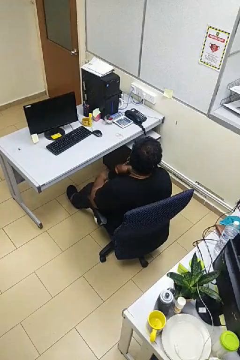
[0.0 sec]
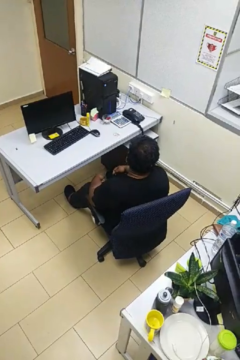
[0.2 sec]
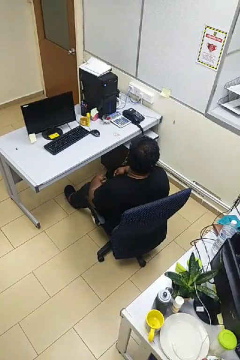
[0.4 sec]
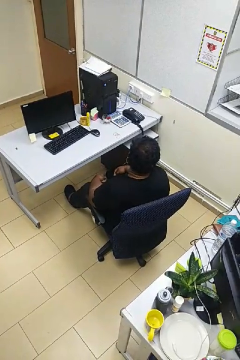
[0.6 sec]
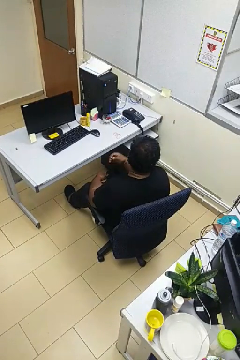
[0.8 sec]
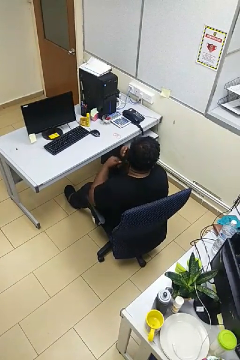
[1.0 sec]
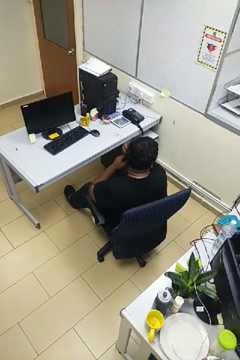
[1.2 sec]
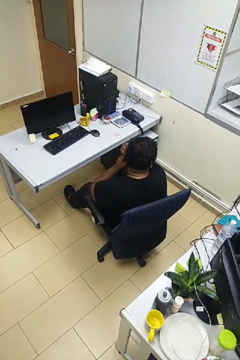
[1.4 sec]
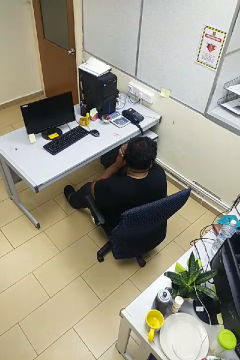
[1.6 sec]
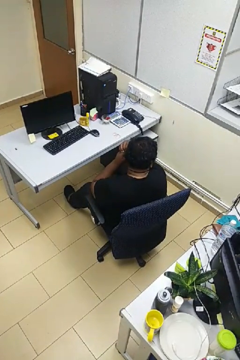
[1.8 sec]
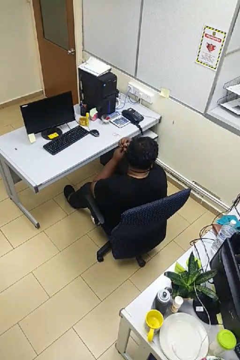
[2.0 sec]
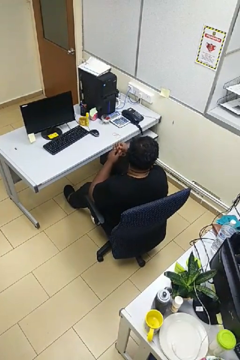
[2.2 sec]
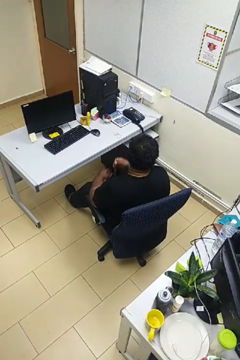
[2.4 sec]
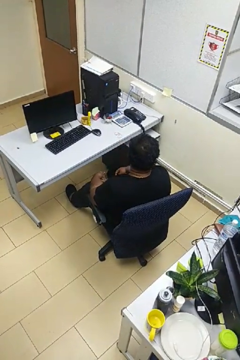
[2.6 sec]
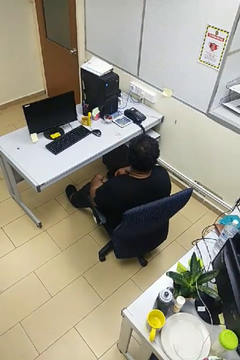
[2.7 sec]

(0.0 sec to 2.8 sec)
person takes off earrings

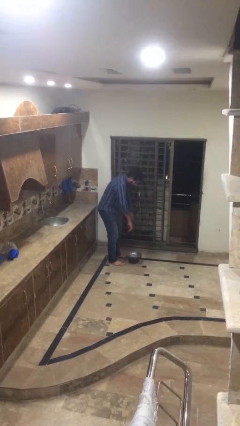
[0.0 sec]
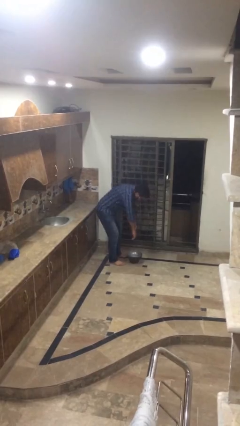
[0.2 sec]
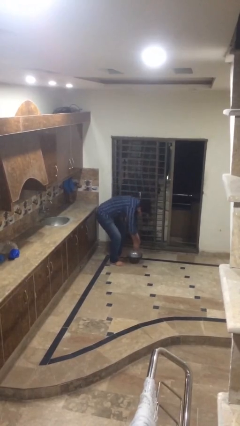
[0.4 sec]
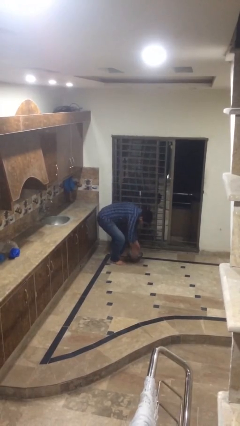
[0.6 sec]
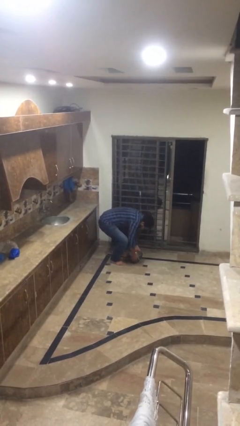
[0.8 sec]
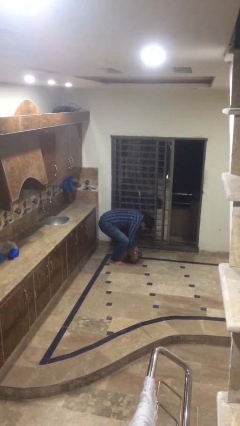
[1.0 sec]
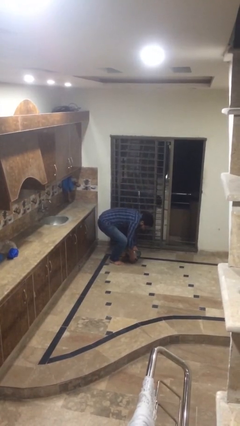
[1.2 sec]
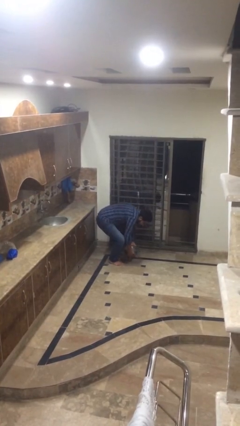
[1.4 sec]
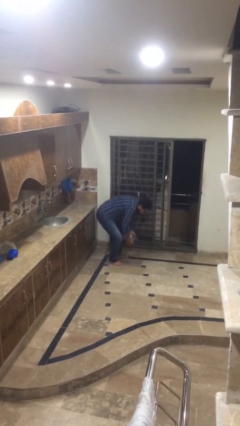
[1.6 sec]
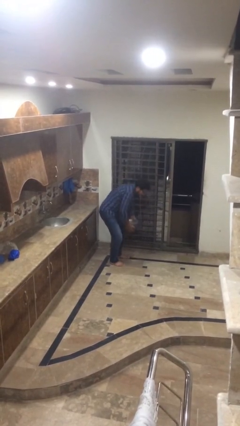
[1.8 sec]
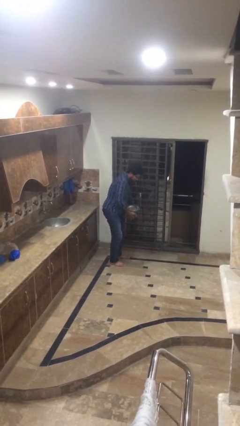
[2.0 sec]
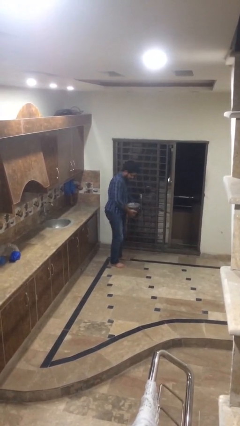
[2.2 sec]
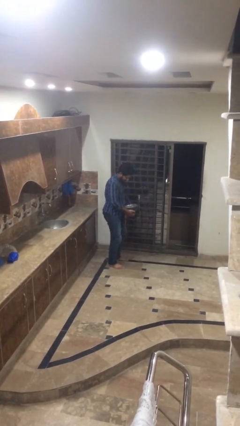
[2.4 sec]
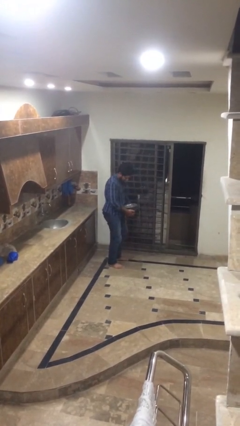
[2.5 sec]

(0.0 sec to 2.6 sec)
person picks up object from floor

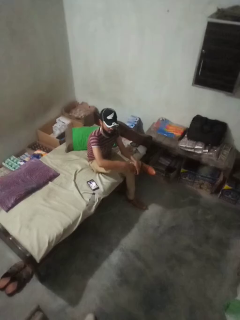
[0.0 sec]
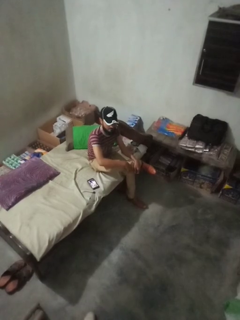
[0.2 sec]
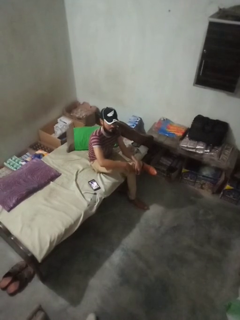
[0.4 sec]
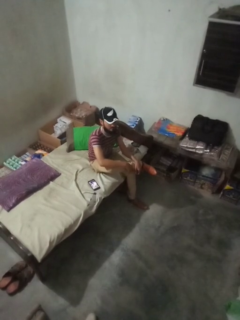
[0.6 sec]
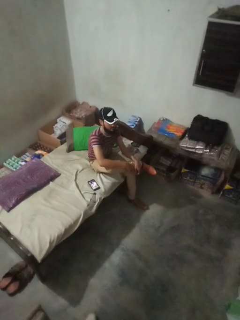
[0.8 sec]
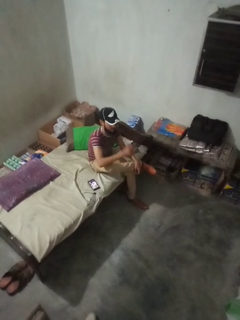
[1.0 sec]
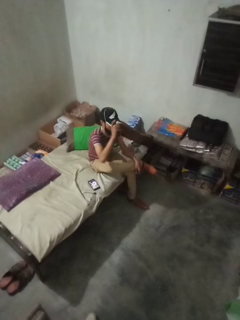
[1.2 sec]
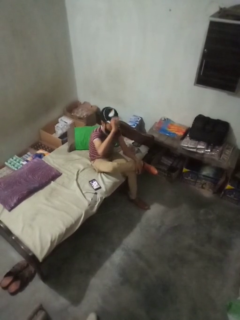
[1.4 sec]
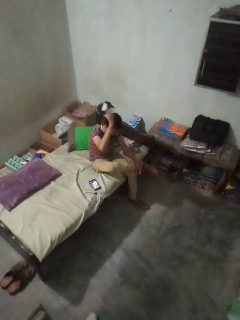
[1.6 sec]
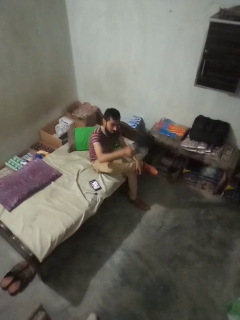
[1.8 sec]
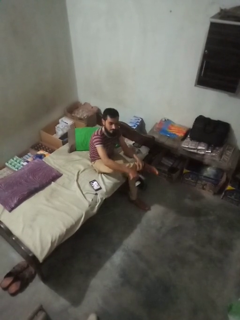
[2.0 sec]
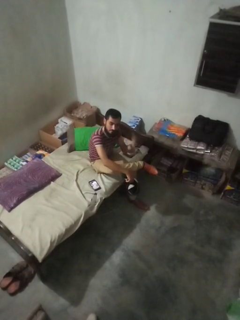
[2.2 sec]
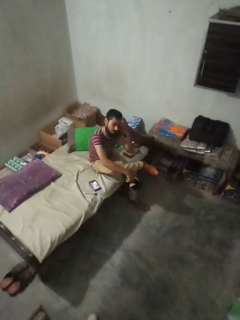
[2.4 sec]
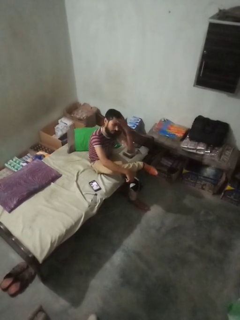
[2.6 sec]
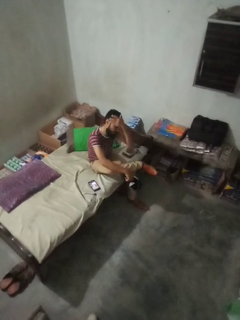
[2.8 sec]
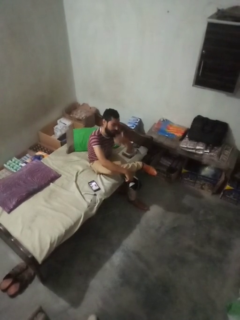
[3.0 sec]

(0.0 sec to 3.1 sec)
person takes off hat

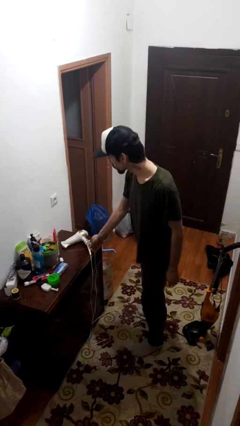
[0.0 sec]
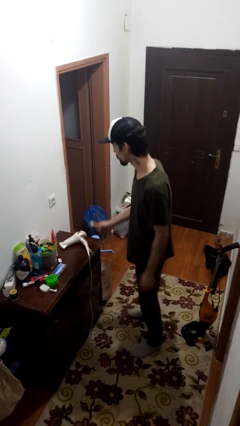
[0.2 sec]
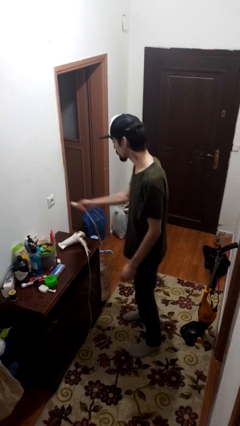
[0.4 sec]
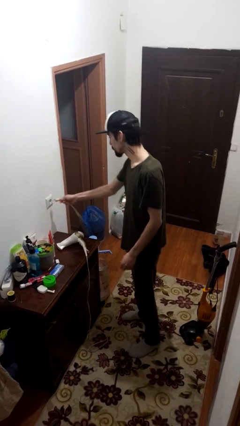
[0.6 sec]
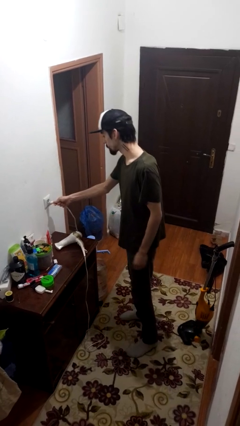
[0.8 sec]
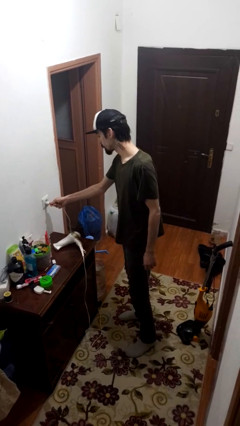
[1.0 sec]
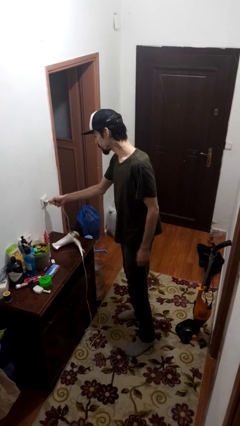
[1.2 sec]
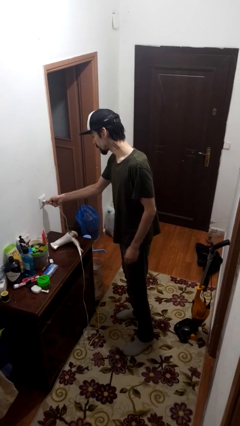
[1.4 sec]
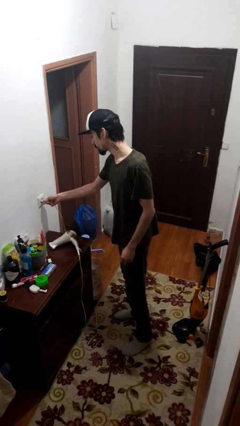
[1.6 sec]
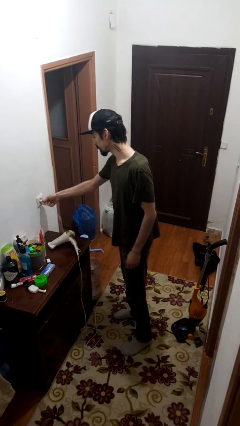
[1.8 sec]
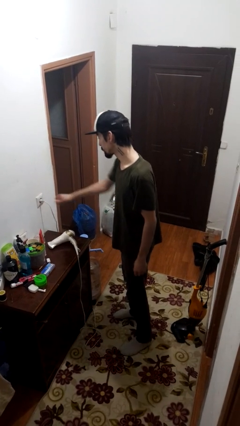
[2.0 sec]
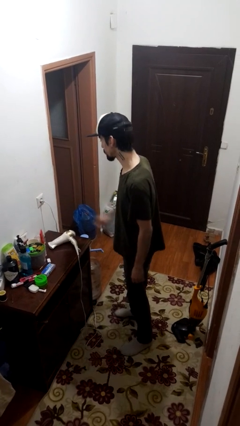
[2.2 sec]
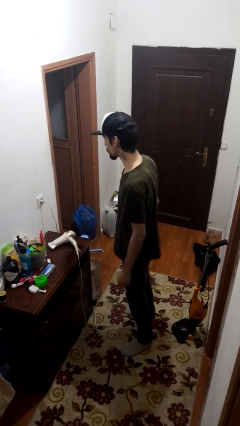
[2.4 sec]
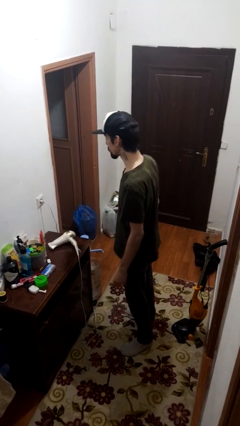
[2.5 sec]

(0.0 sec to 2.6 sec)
person plugs into electrical socket

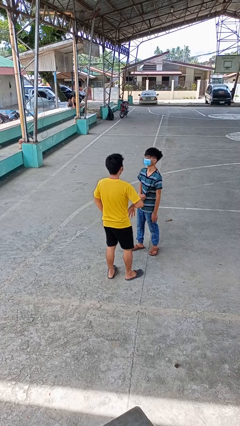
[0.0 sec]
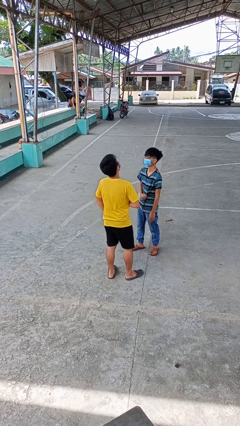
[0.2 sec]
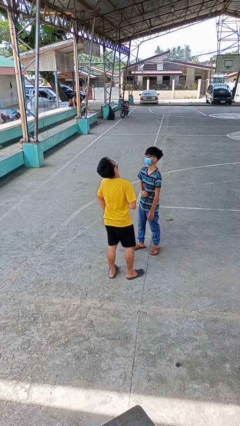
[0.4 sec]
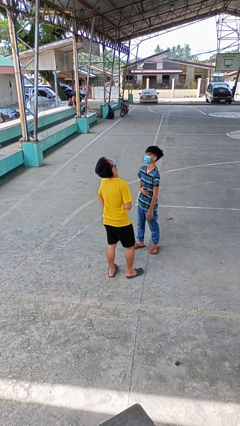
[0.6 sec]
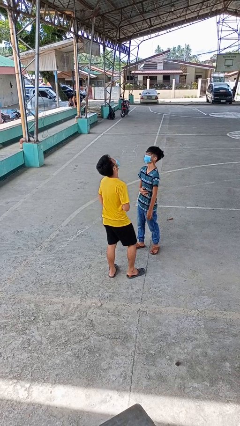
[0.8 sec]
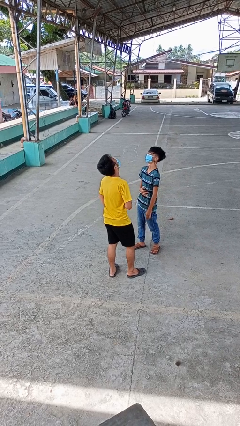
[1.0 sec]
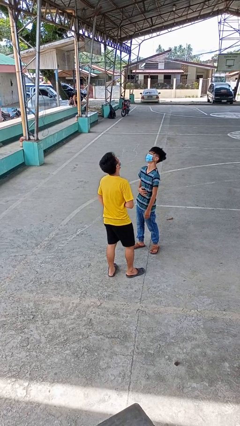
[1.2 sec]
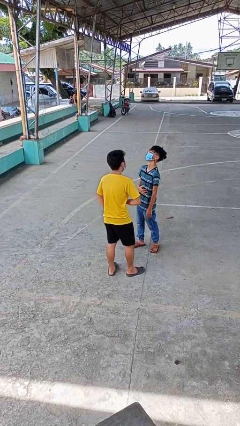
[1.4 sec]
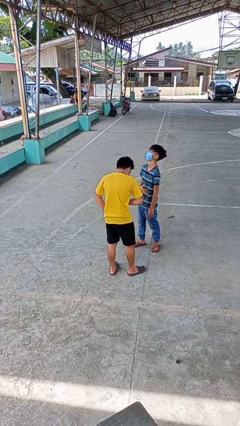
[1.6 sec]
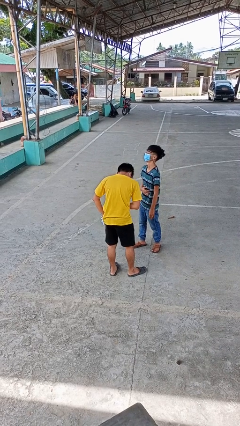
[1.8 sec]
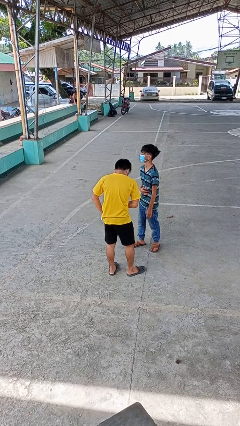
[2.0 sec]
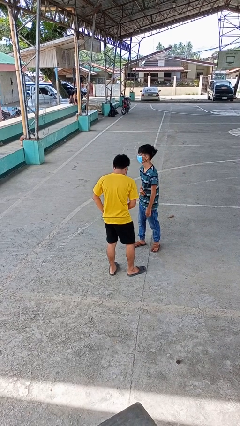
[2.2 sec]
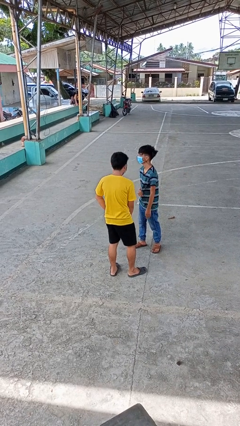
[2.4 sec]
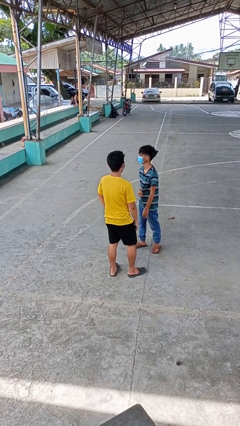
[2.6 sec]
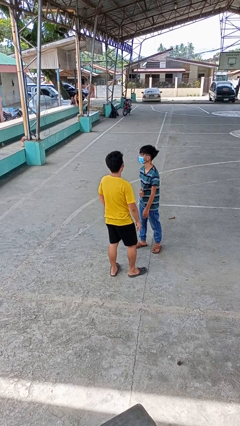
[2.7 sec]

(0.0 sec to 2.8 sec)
person laughs with person

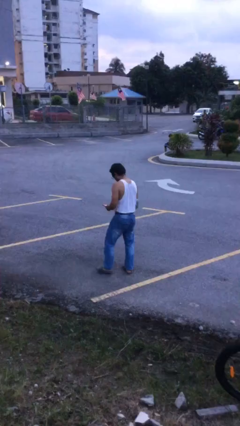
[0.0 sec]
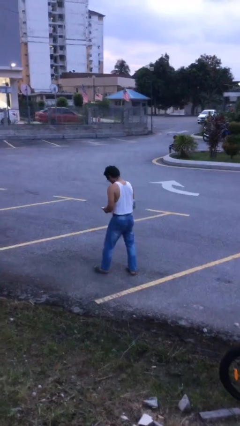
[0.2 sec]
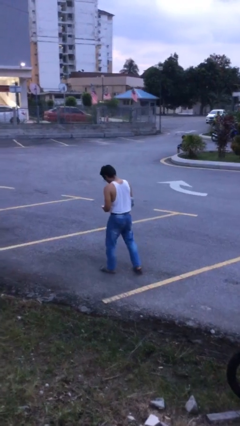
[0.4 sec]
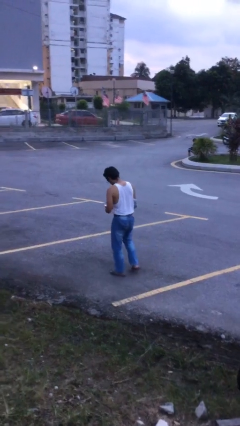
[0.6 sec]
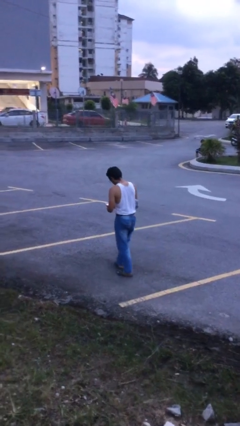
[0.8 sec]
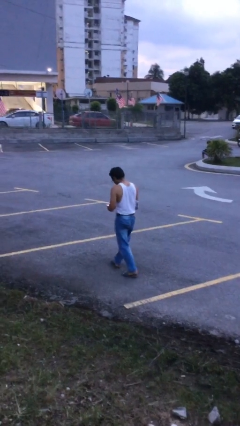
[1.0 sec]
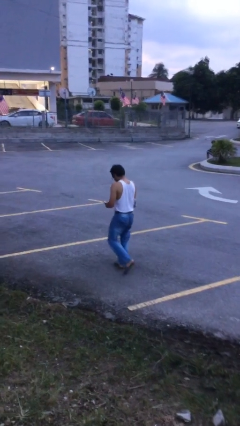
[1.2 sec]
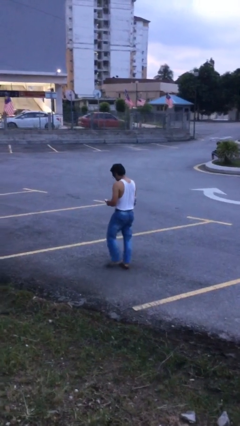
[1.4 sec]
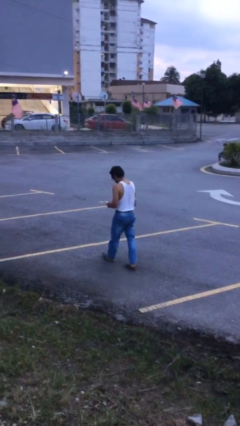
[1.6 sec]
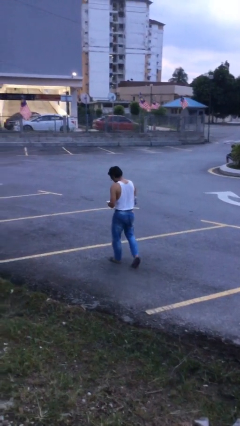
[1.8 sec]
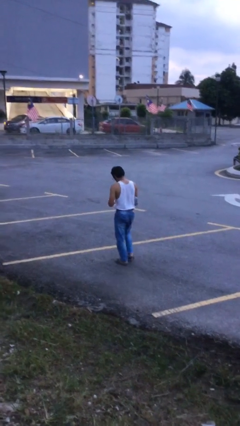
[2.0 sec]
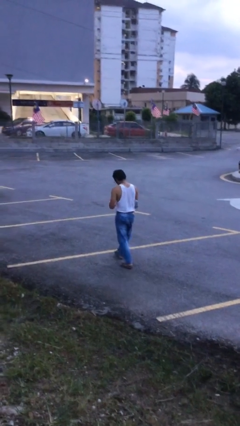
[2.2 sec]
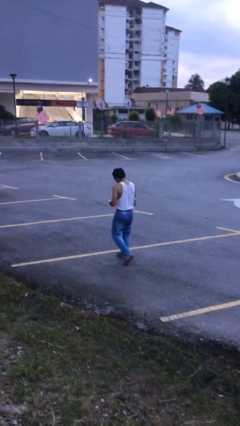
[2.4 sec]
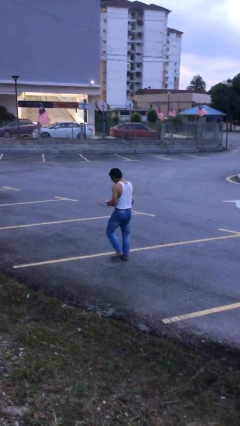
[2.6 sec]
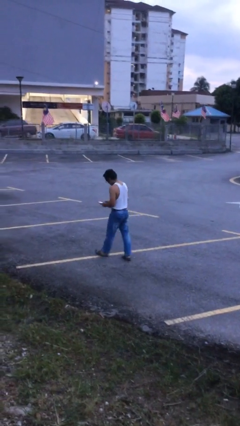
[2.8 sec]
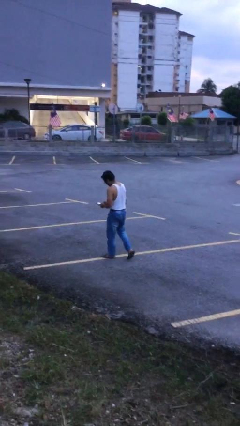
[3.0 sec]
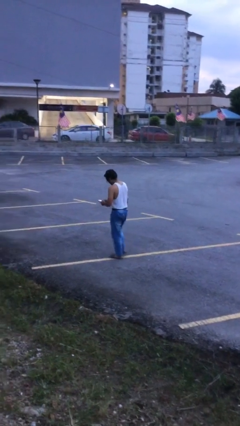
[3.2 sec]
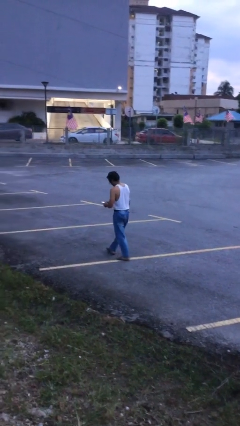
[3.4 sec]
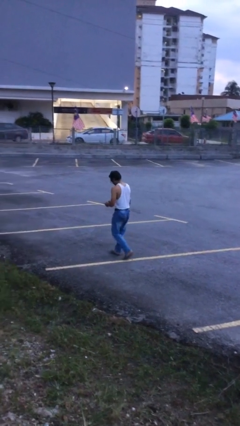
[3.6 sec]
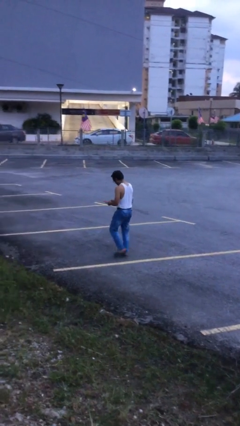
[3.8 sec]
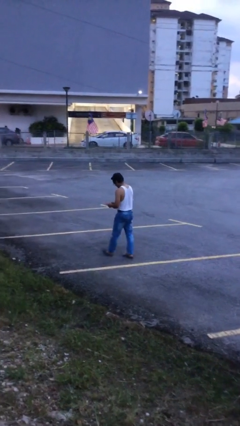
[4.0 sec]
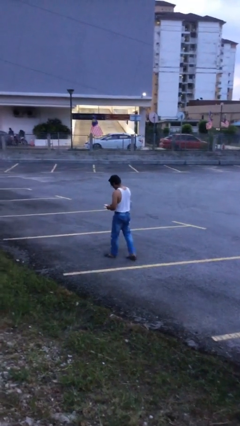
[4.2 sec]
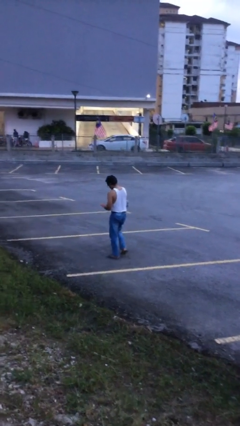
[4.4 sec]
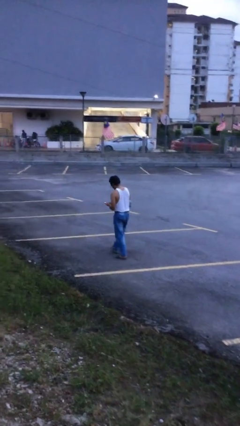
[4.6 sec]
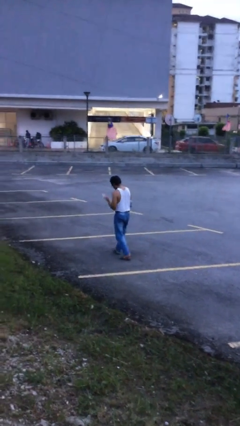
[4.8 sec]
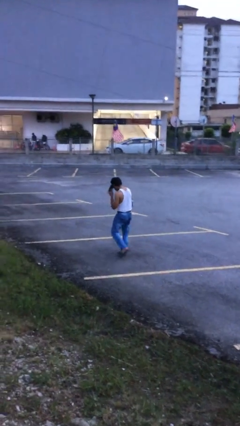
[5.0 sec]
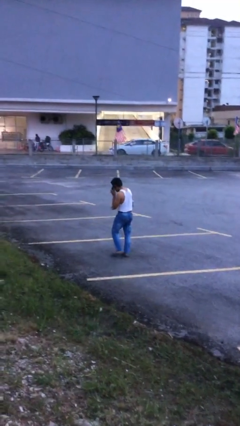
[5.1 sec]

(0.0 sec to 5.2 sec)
person texts on phone
